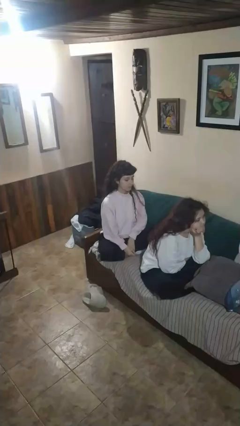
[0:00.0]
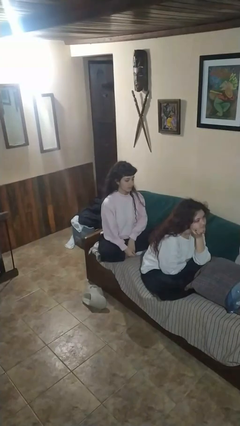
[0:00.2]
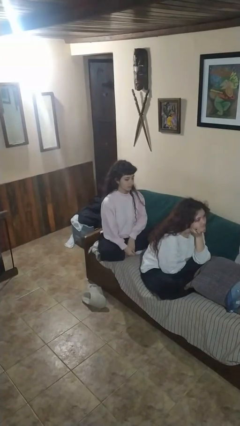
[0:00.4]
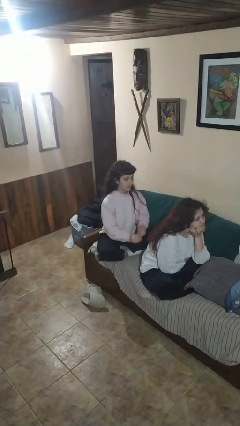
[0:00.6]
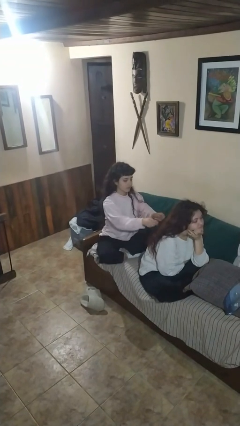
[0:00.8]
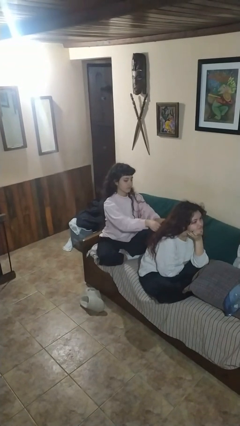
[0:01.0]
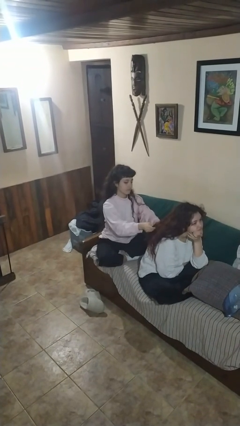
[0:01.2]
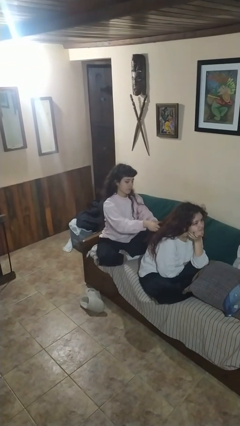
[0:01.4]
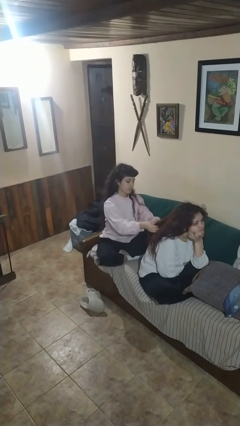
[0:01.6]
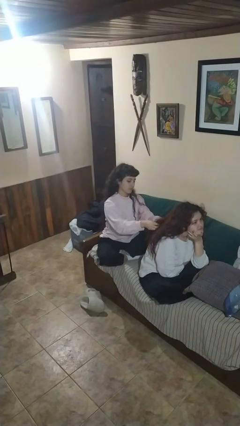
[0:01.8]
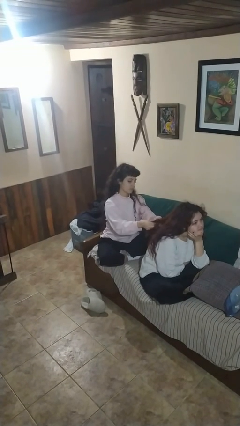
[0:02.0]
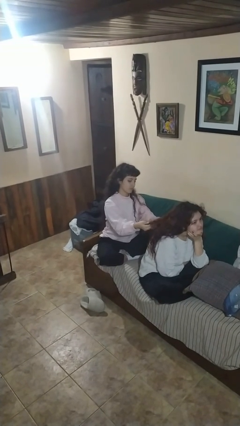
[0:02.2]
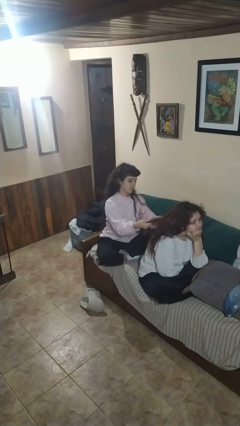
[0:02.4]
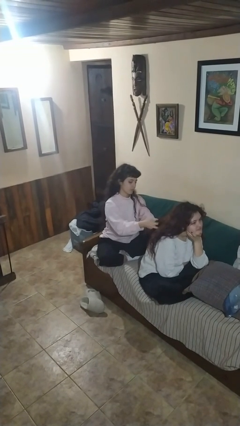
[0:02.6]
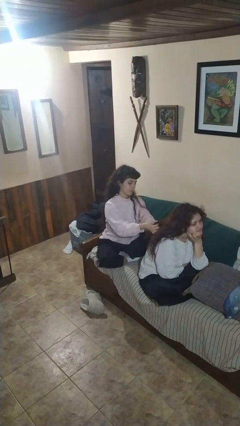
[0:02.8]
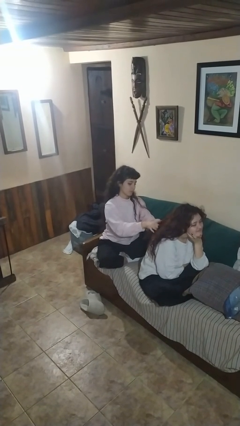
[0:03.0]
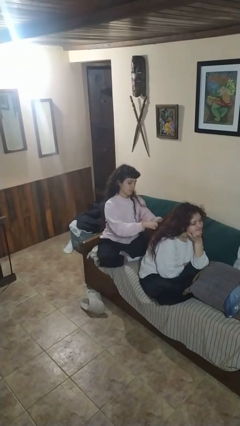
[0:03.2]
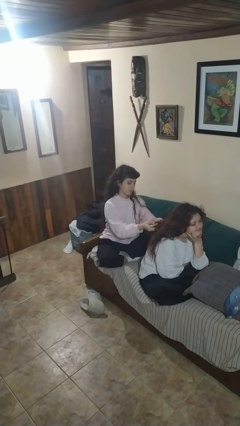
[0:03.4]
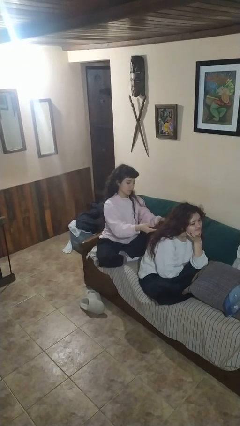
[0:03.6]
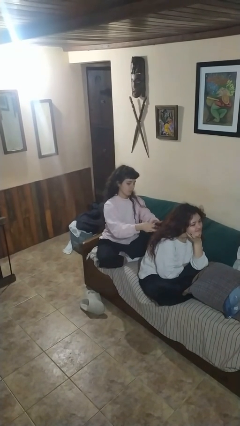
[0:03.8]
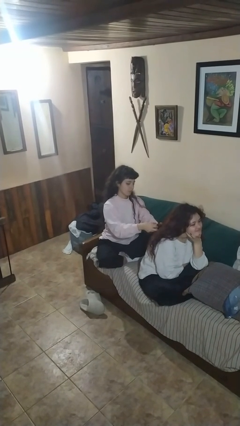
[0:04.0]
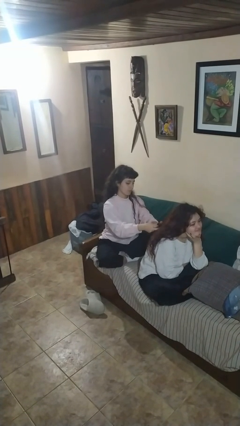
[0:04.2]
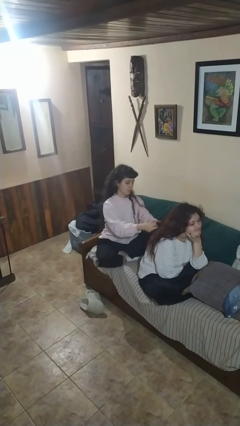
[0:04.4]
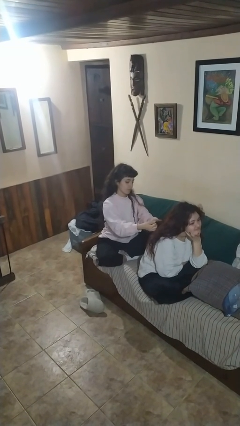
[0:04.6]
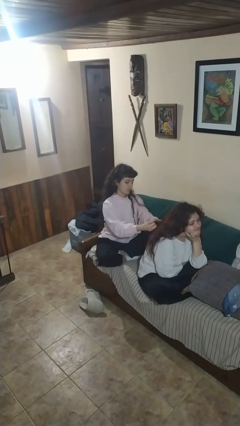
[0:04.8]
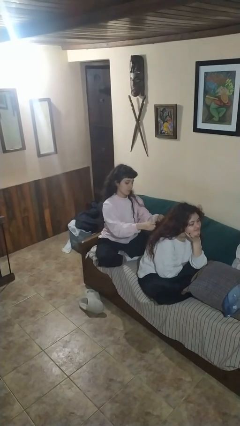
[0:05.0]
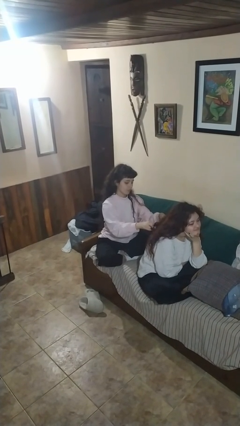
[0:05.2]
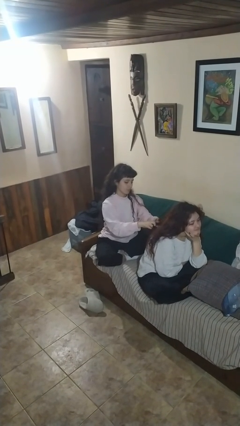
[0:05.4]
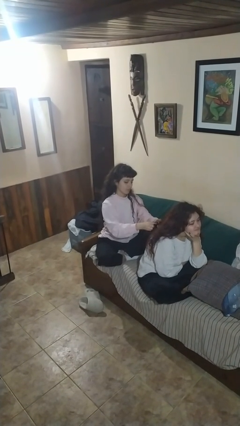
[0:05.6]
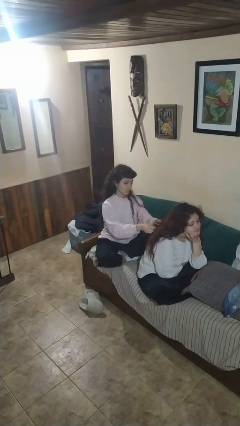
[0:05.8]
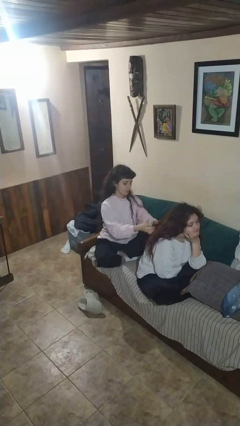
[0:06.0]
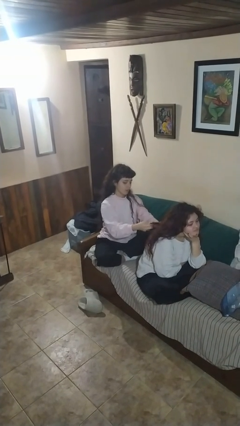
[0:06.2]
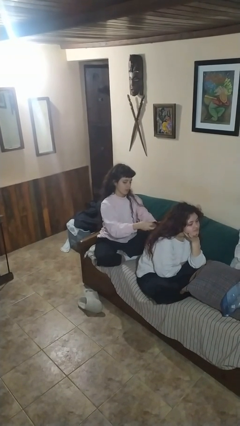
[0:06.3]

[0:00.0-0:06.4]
person braids hair of person

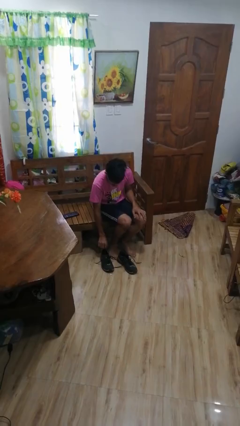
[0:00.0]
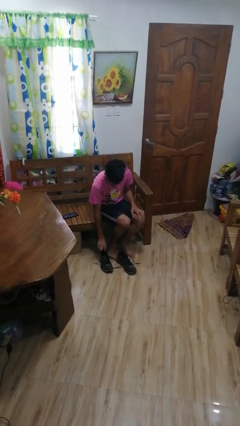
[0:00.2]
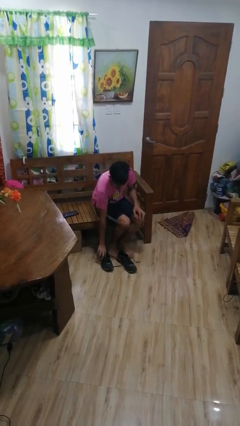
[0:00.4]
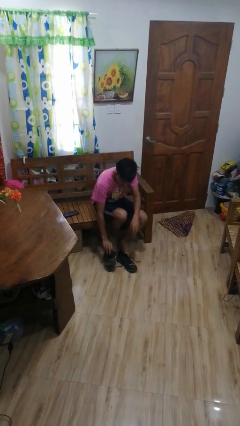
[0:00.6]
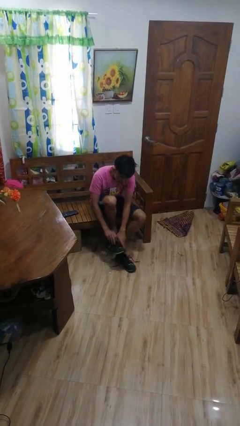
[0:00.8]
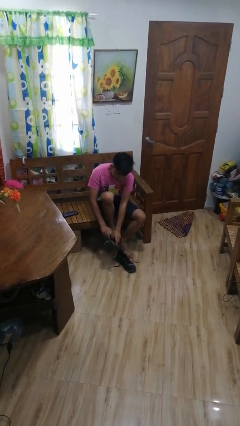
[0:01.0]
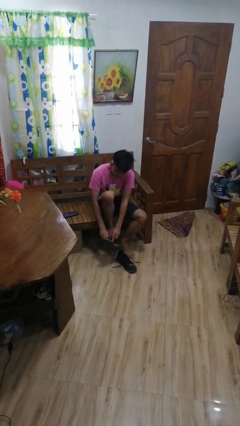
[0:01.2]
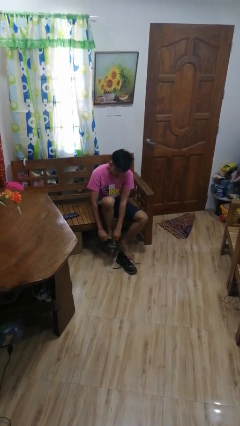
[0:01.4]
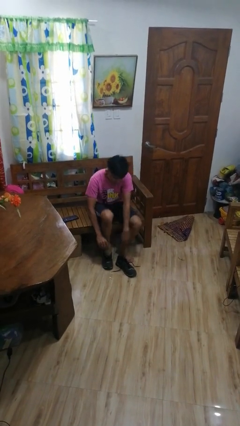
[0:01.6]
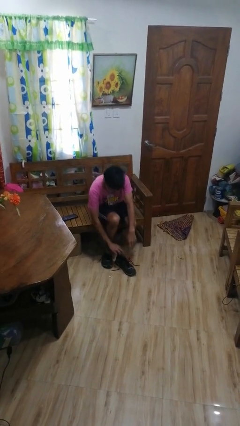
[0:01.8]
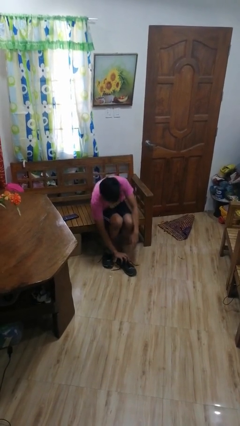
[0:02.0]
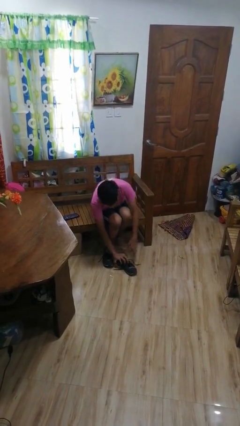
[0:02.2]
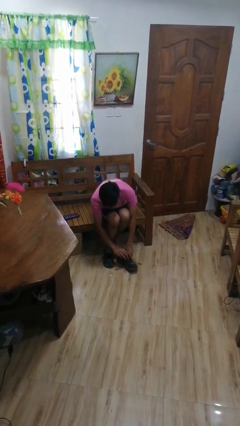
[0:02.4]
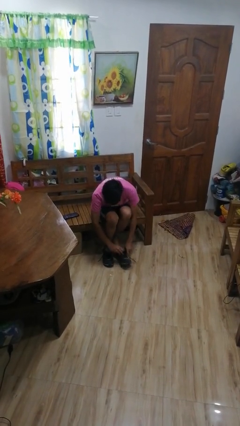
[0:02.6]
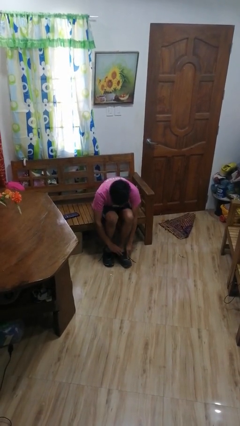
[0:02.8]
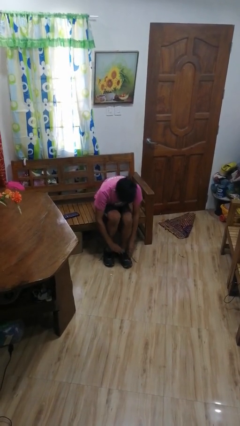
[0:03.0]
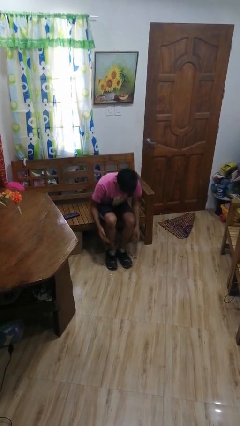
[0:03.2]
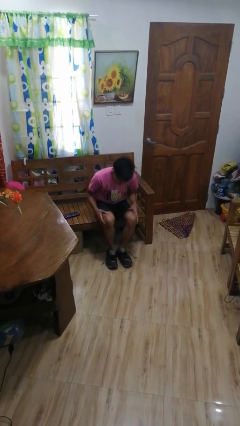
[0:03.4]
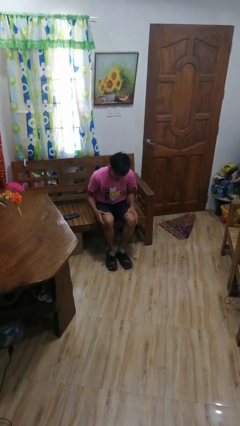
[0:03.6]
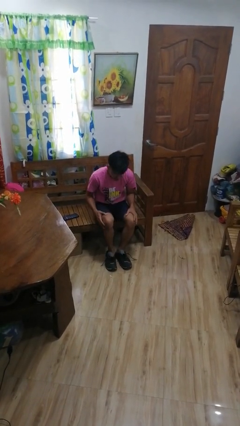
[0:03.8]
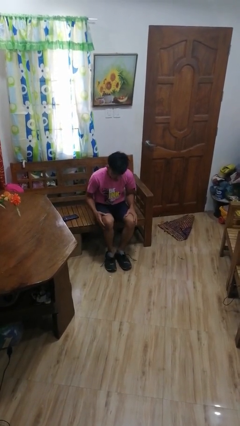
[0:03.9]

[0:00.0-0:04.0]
person puts on shoes

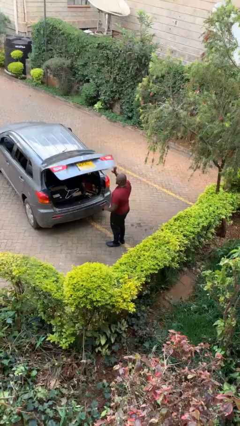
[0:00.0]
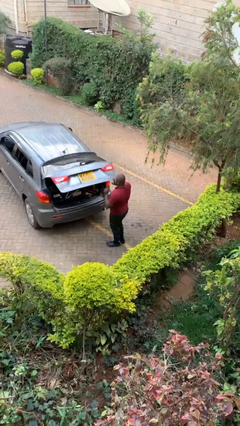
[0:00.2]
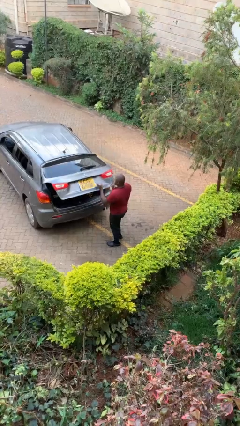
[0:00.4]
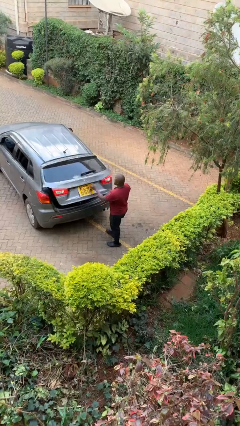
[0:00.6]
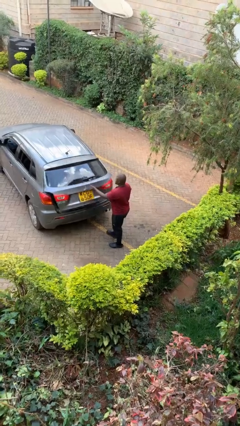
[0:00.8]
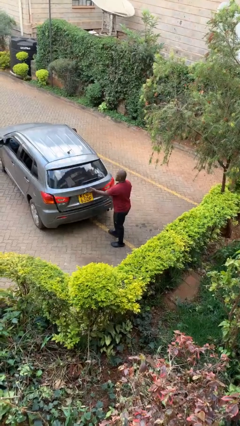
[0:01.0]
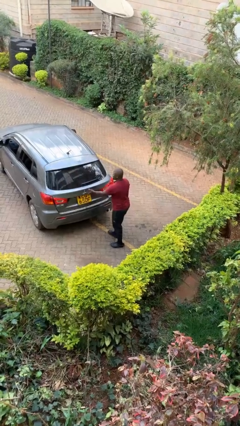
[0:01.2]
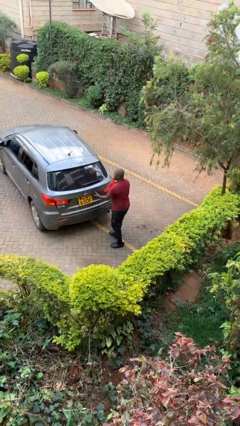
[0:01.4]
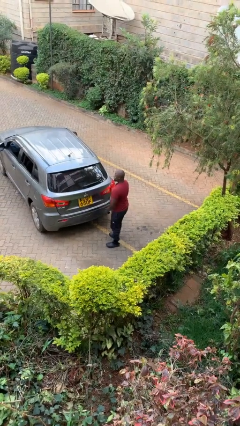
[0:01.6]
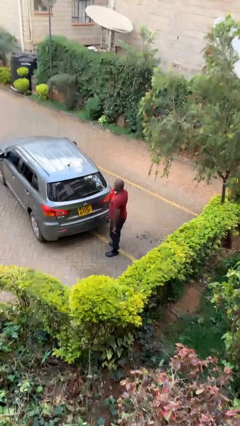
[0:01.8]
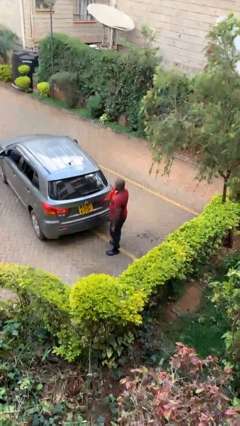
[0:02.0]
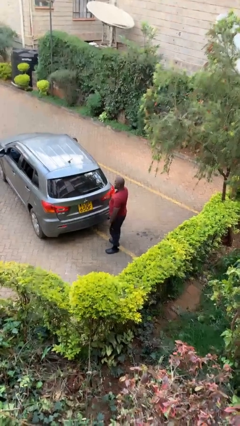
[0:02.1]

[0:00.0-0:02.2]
person closes car trunk

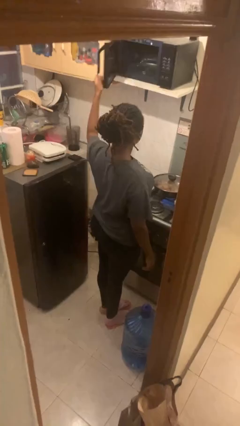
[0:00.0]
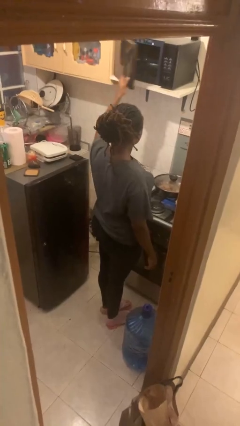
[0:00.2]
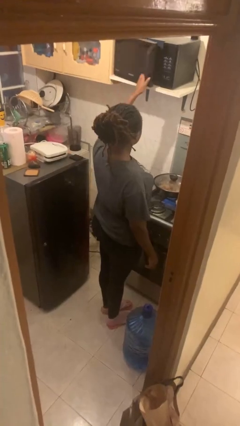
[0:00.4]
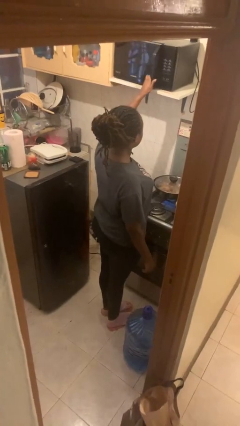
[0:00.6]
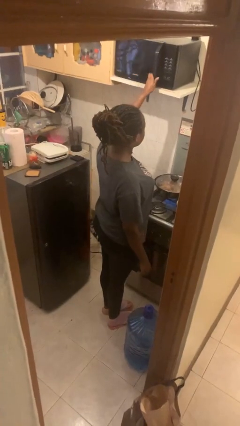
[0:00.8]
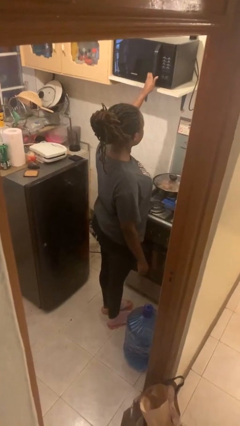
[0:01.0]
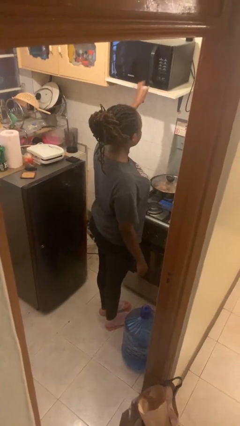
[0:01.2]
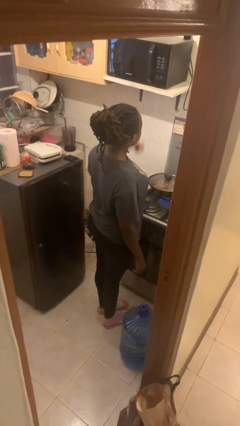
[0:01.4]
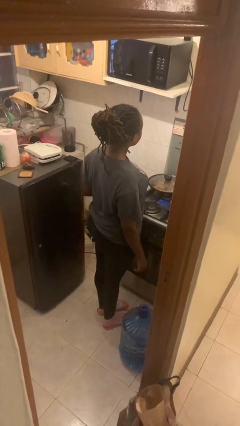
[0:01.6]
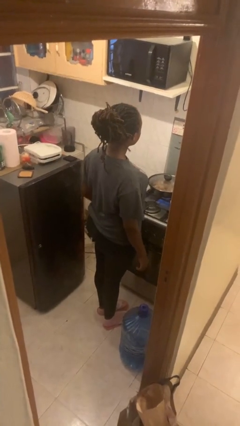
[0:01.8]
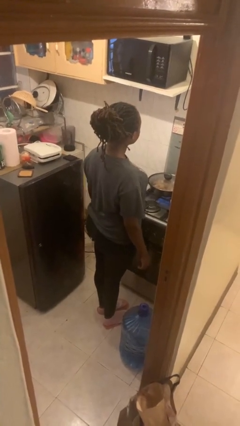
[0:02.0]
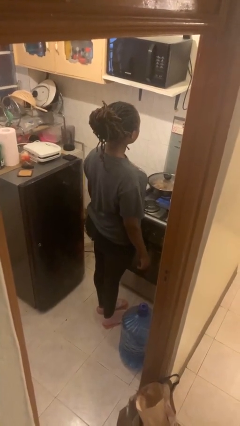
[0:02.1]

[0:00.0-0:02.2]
person closes microwave

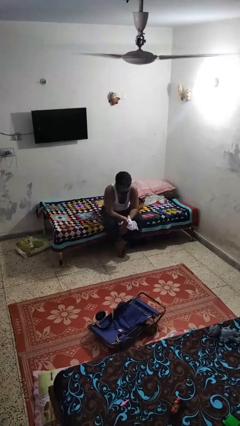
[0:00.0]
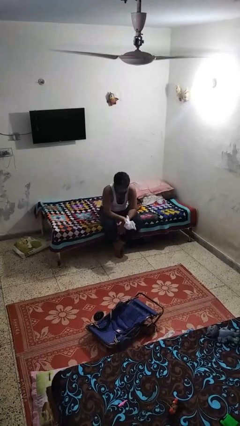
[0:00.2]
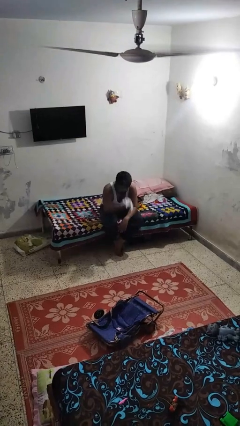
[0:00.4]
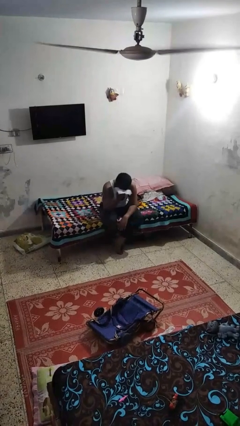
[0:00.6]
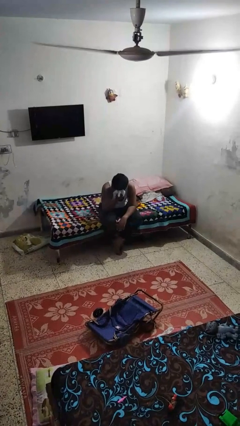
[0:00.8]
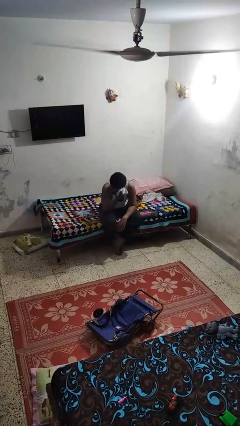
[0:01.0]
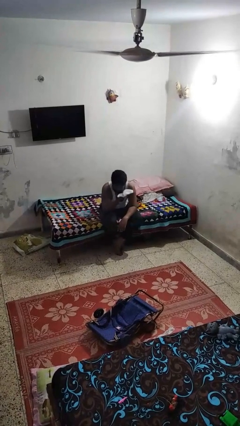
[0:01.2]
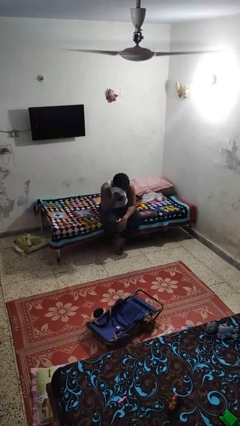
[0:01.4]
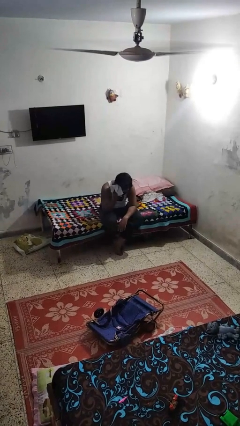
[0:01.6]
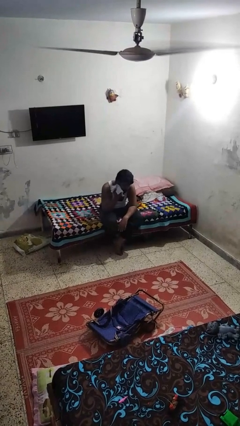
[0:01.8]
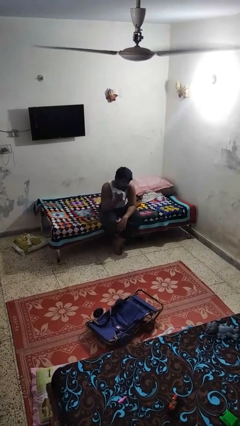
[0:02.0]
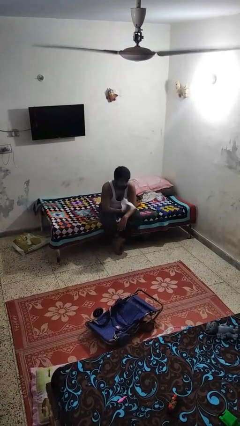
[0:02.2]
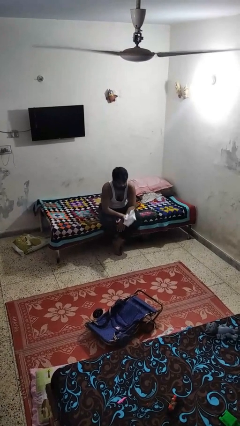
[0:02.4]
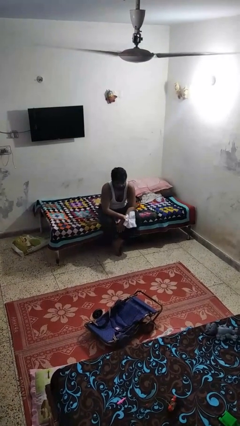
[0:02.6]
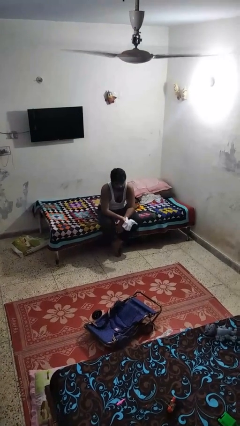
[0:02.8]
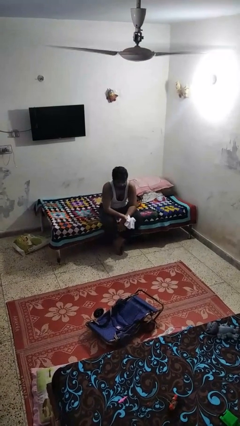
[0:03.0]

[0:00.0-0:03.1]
person wipes mouth with napkin
